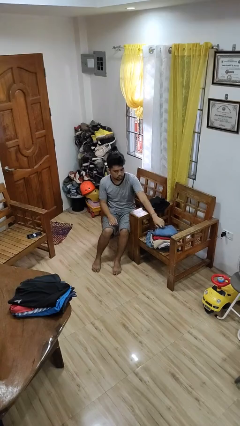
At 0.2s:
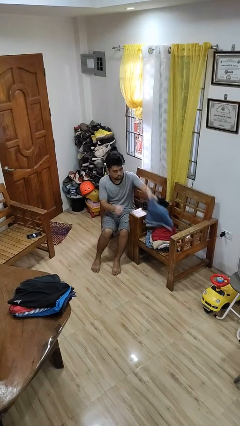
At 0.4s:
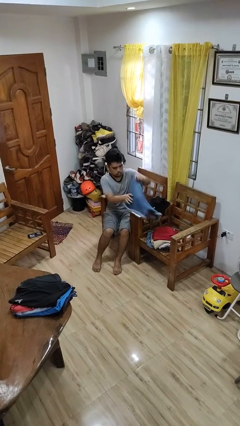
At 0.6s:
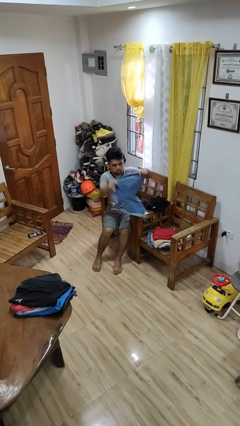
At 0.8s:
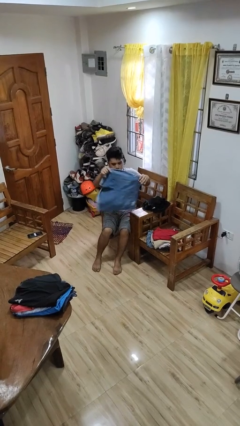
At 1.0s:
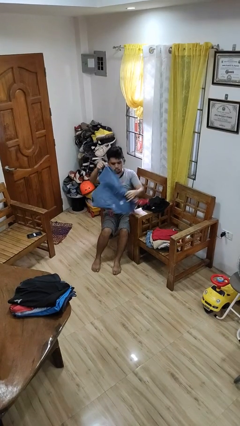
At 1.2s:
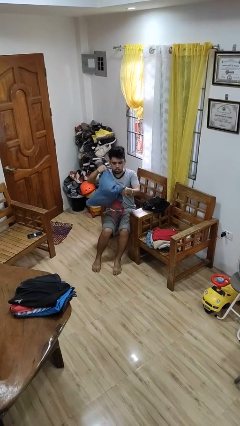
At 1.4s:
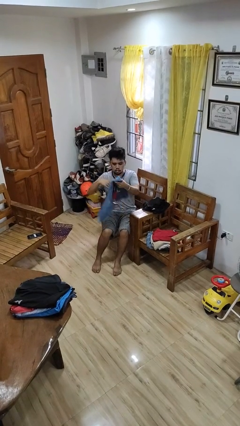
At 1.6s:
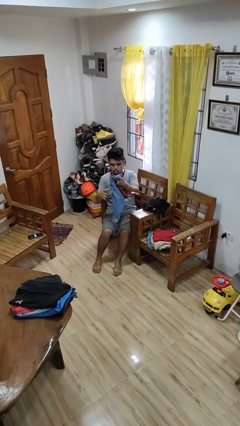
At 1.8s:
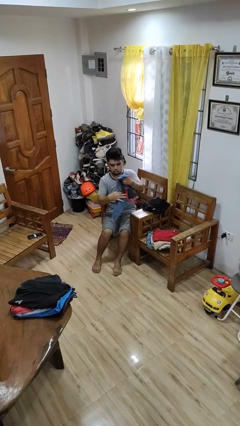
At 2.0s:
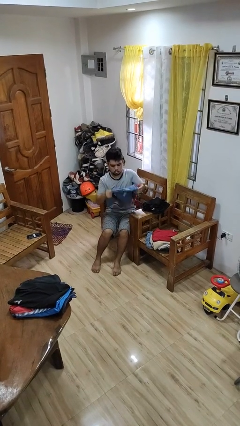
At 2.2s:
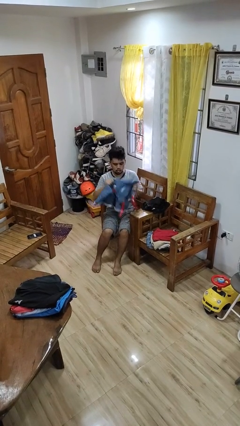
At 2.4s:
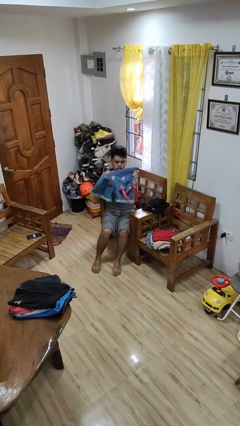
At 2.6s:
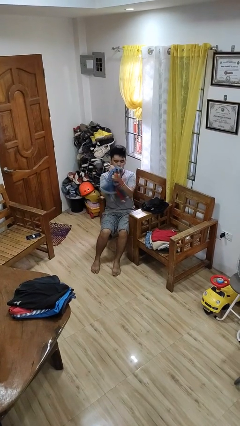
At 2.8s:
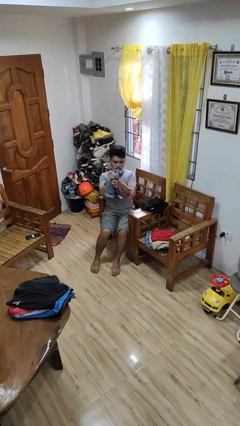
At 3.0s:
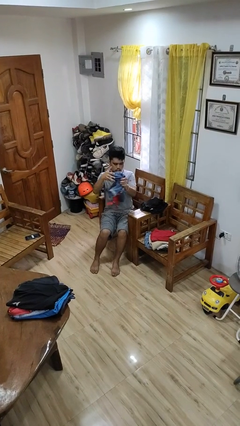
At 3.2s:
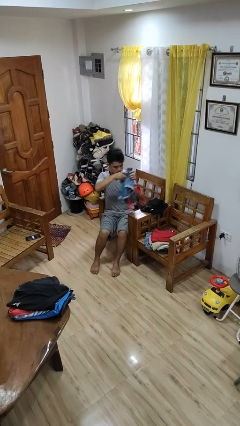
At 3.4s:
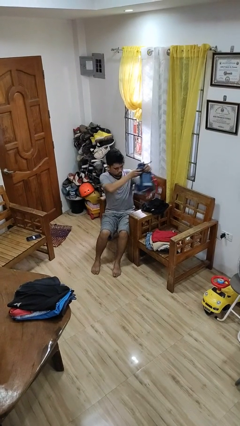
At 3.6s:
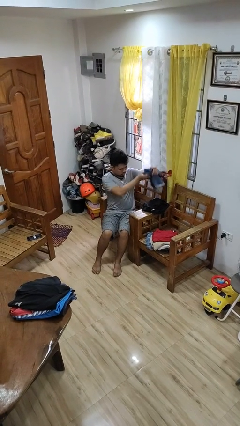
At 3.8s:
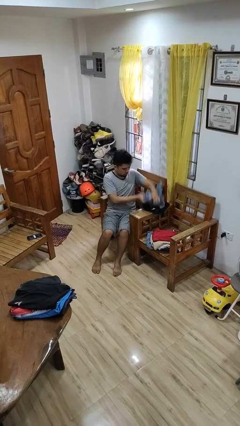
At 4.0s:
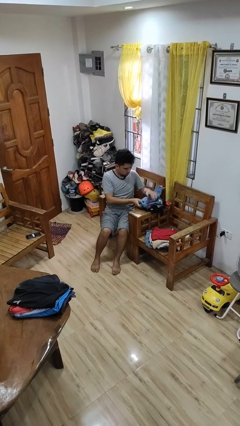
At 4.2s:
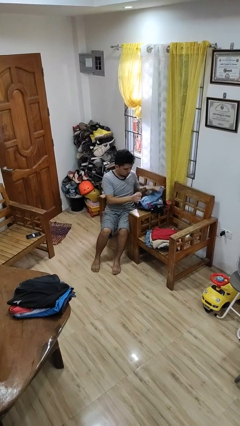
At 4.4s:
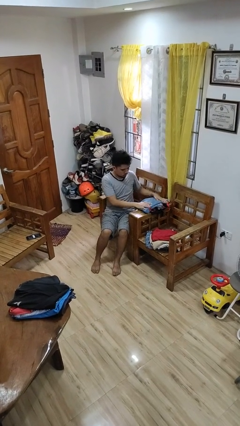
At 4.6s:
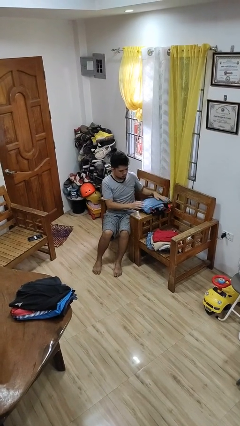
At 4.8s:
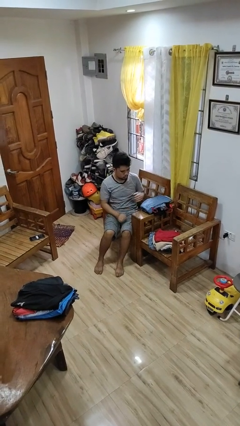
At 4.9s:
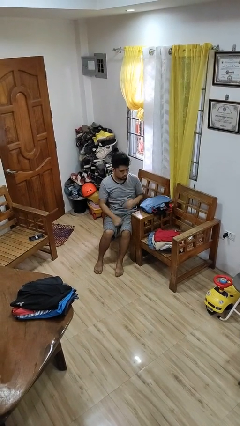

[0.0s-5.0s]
person folds pants

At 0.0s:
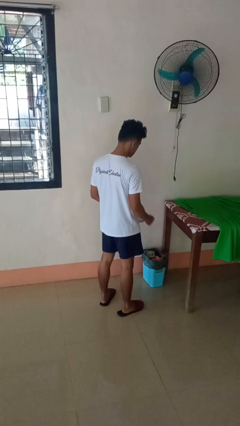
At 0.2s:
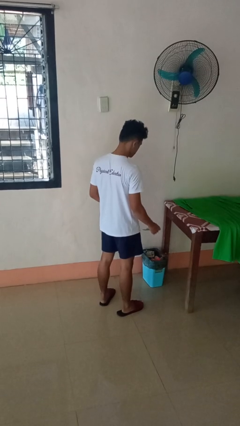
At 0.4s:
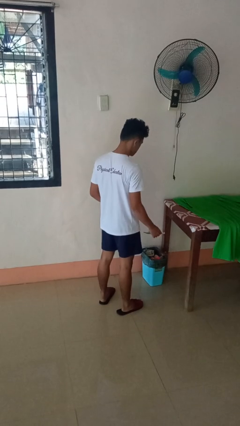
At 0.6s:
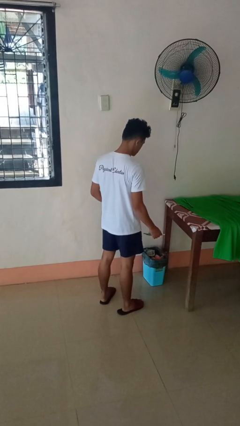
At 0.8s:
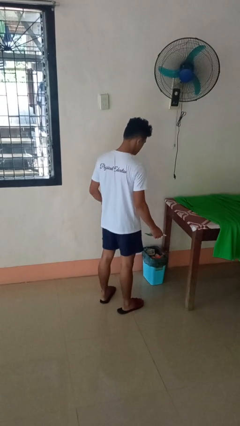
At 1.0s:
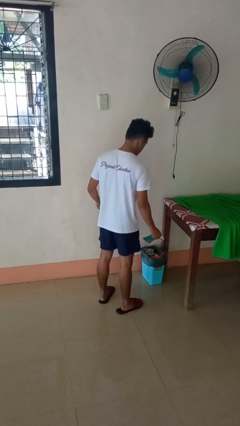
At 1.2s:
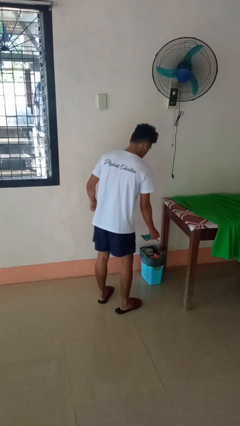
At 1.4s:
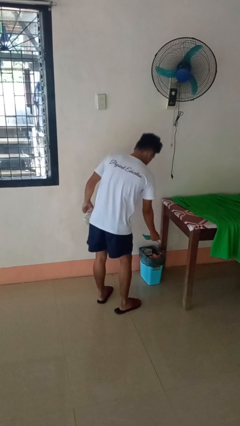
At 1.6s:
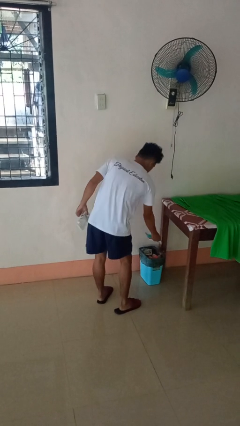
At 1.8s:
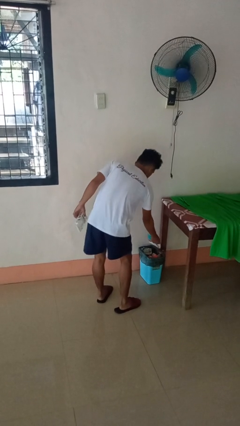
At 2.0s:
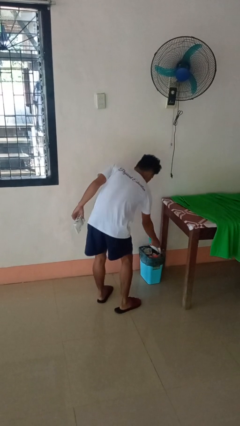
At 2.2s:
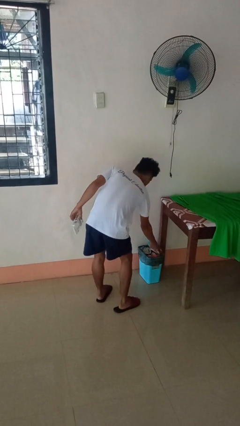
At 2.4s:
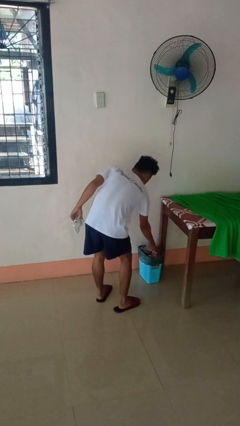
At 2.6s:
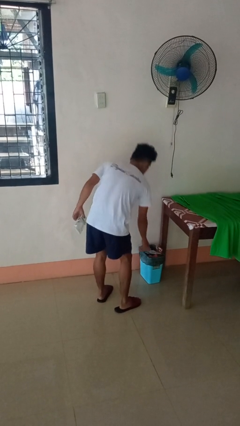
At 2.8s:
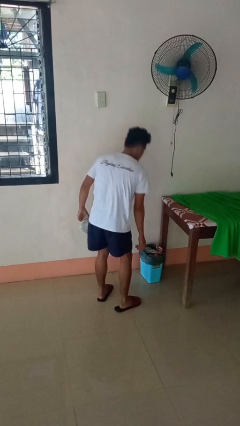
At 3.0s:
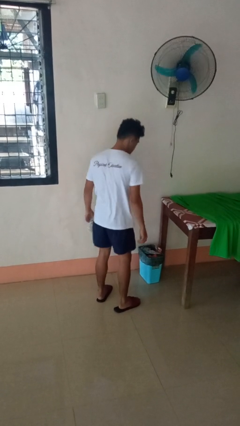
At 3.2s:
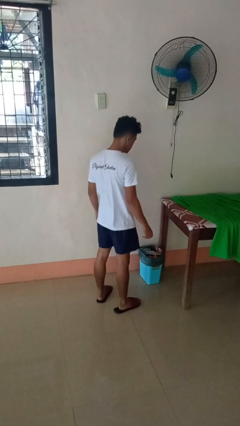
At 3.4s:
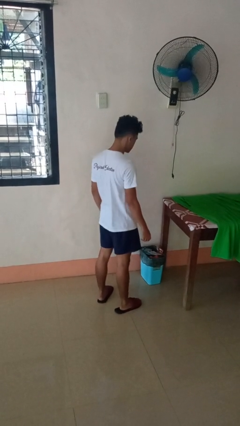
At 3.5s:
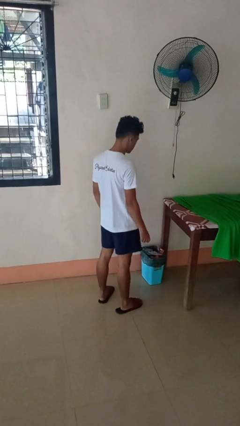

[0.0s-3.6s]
person discards trash

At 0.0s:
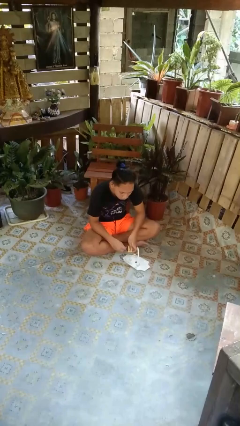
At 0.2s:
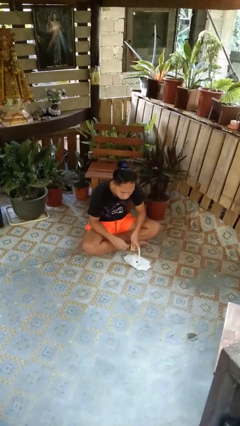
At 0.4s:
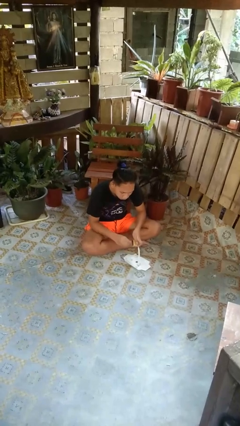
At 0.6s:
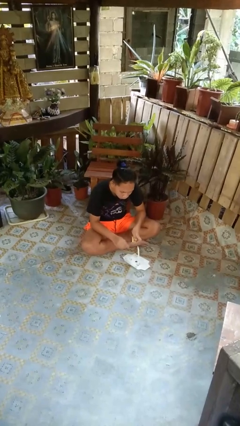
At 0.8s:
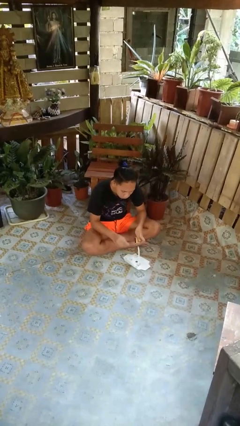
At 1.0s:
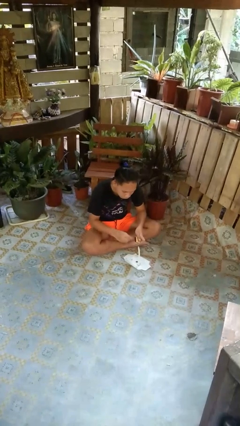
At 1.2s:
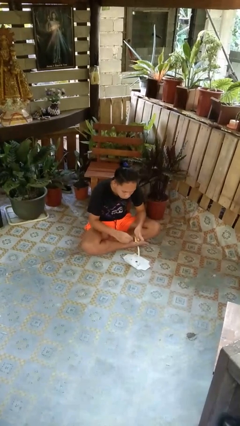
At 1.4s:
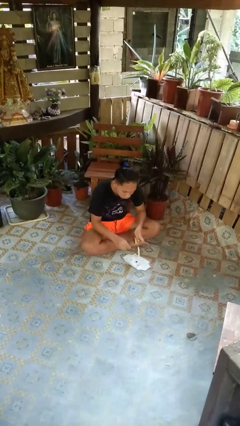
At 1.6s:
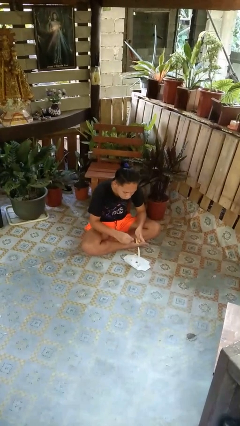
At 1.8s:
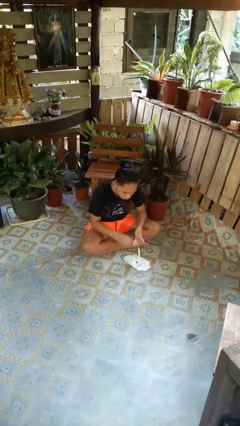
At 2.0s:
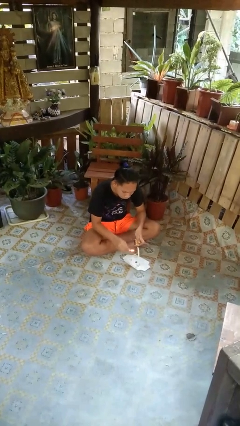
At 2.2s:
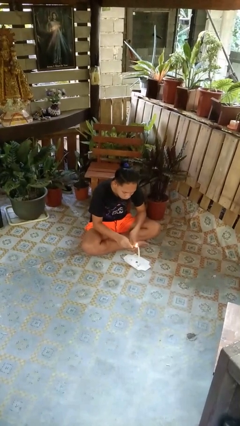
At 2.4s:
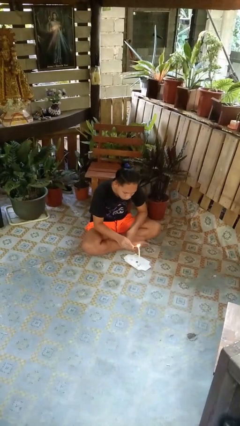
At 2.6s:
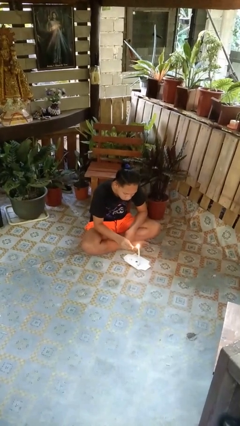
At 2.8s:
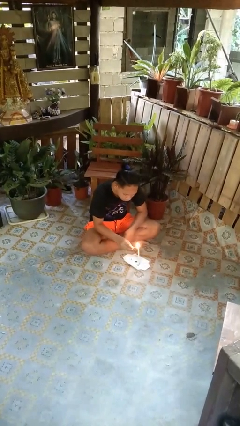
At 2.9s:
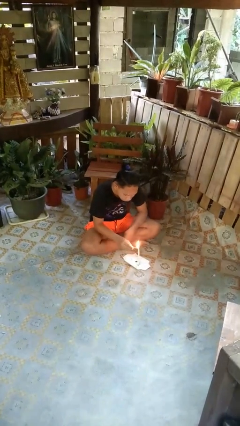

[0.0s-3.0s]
person lights candle

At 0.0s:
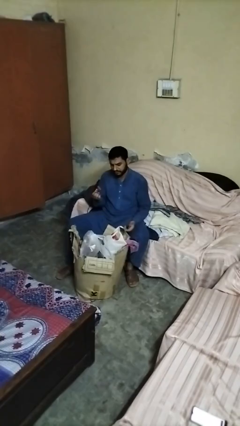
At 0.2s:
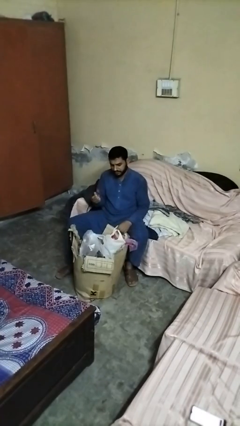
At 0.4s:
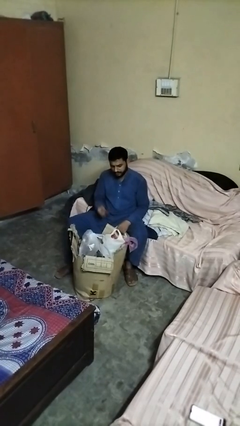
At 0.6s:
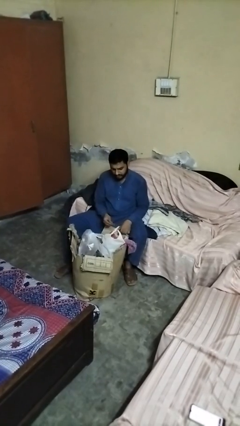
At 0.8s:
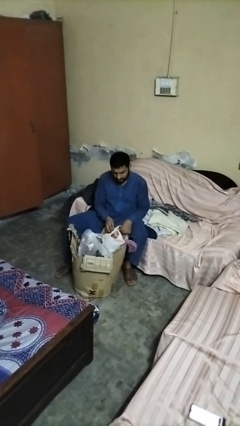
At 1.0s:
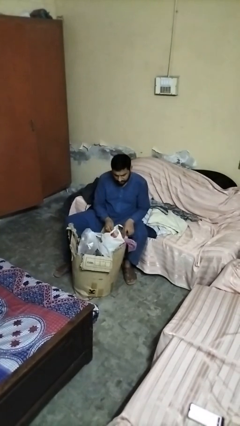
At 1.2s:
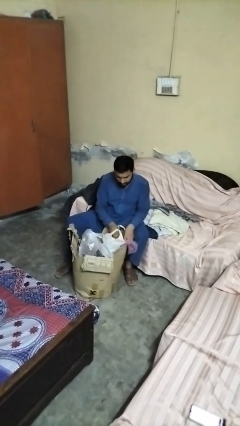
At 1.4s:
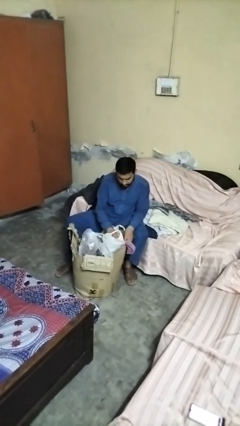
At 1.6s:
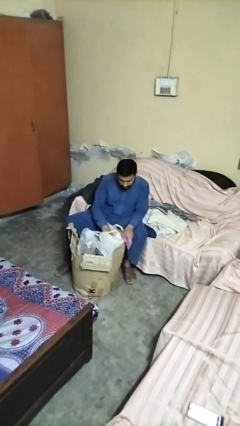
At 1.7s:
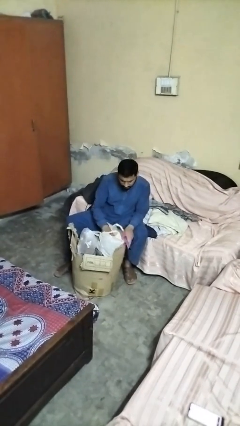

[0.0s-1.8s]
person puts object into box

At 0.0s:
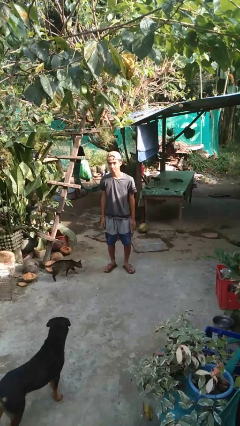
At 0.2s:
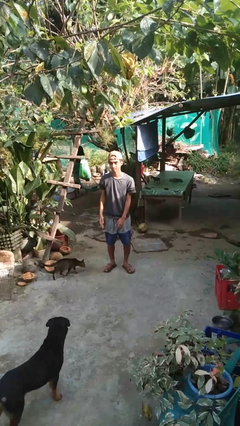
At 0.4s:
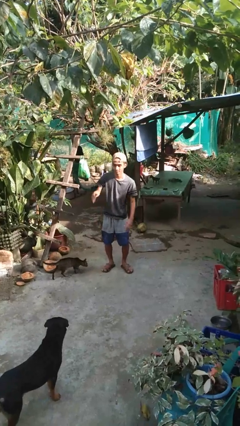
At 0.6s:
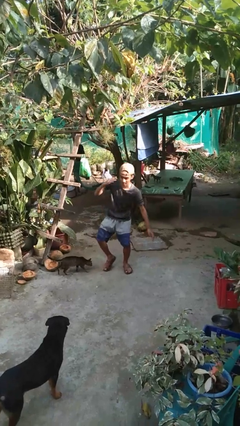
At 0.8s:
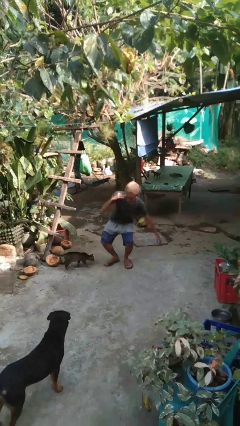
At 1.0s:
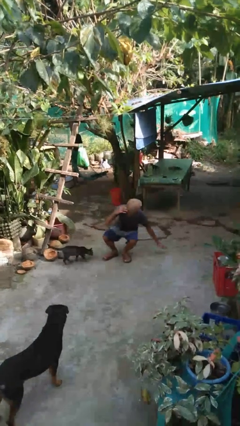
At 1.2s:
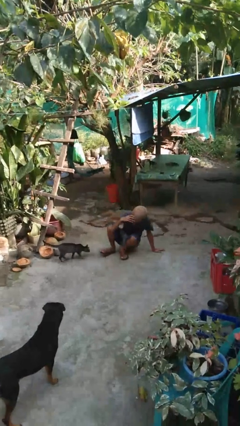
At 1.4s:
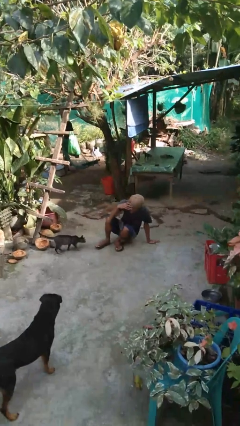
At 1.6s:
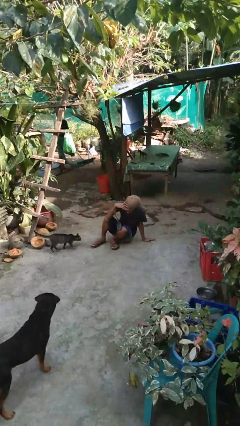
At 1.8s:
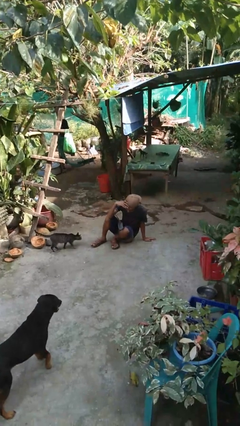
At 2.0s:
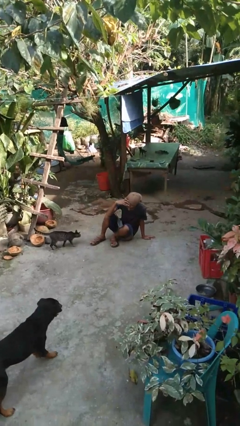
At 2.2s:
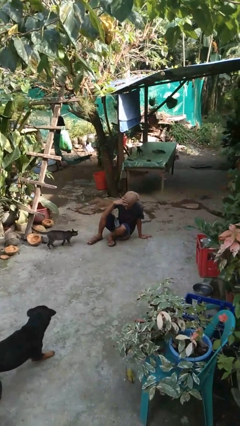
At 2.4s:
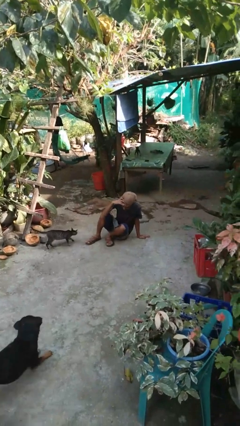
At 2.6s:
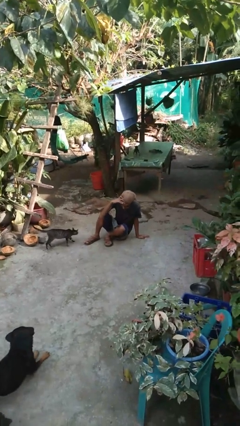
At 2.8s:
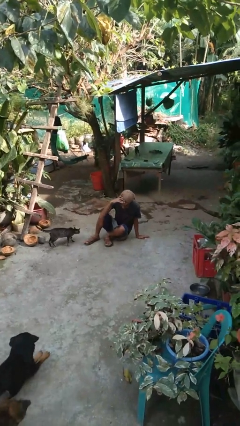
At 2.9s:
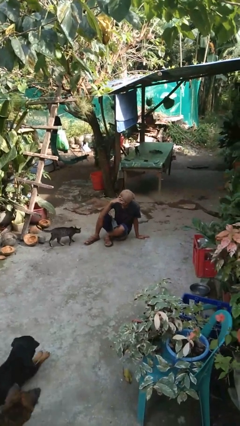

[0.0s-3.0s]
person falls while standing

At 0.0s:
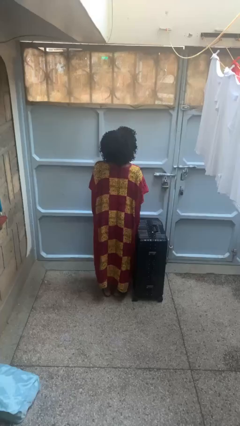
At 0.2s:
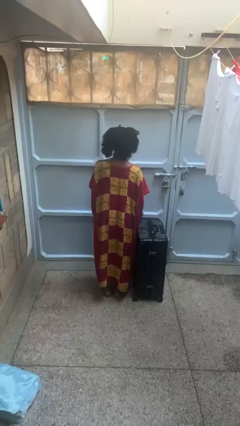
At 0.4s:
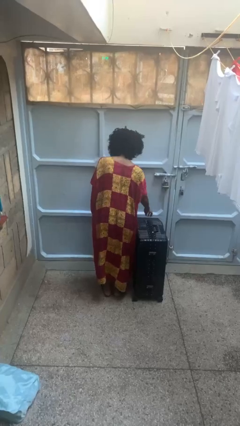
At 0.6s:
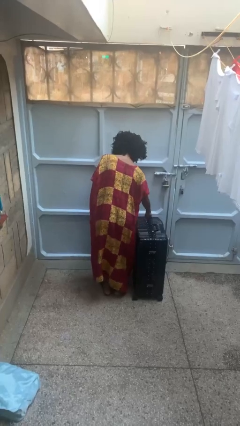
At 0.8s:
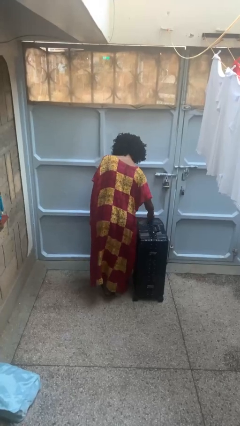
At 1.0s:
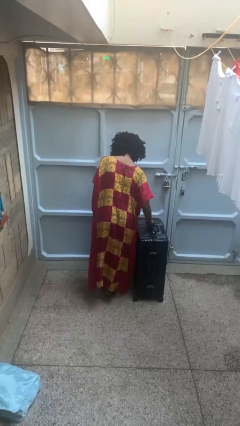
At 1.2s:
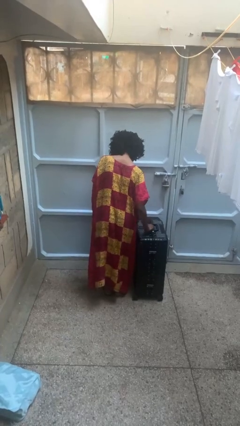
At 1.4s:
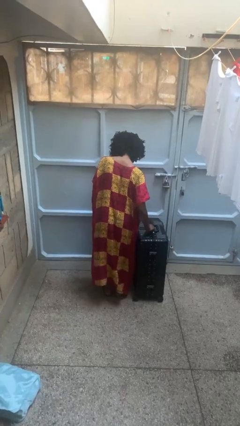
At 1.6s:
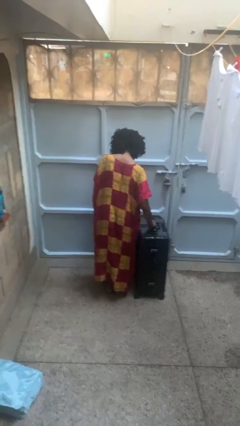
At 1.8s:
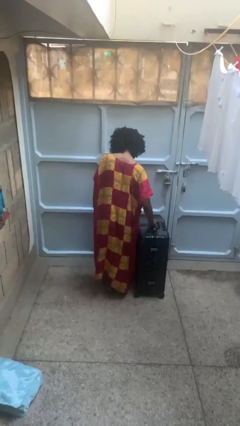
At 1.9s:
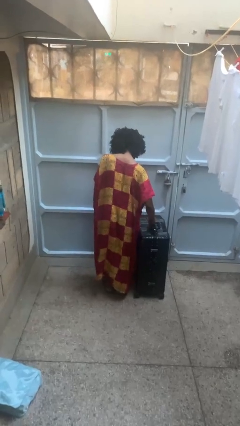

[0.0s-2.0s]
person opens suitcase
